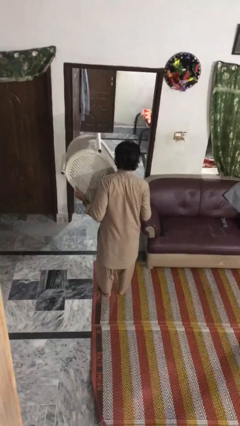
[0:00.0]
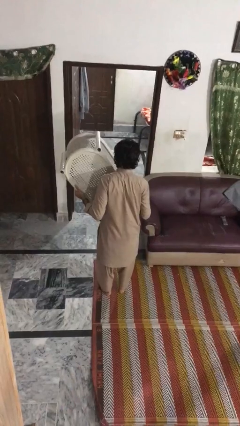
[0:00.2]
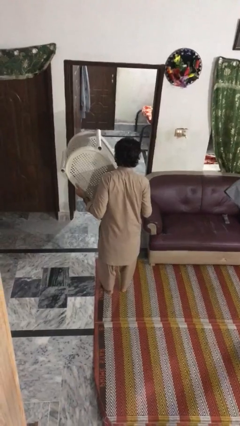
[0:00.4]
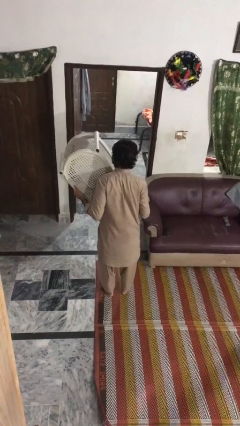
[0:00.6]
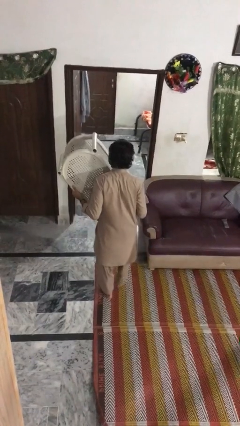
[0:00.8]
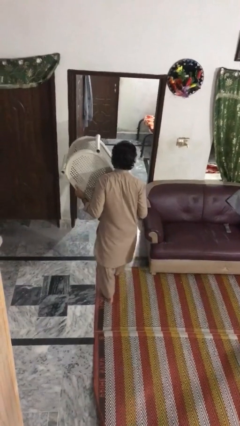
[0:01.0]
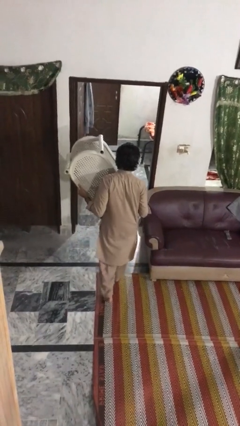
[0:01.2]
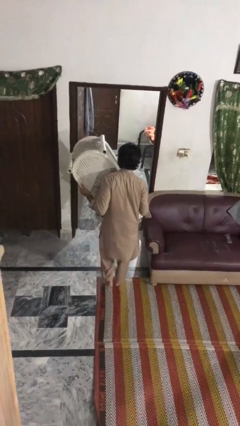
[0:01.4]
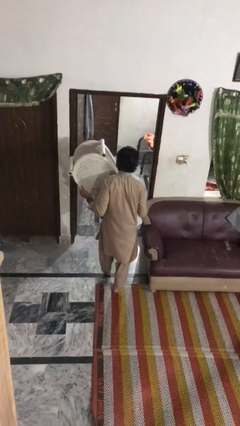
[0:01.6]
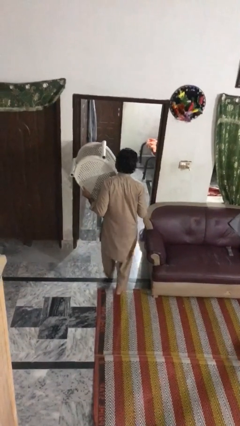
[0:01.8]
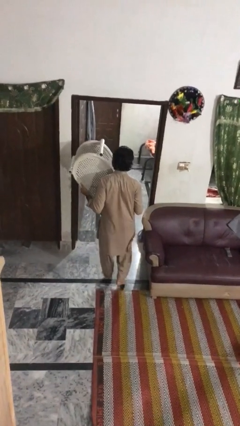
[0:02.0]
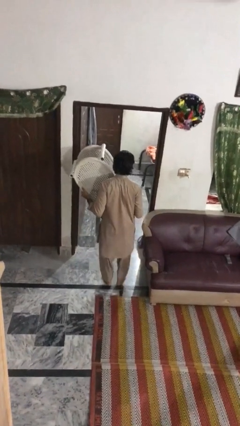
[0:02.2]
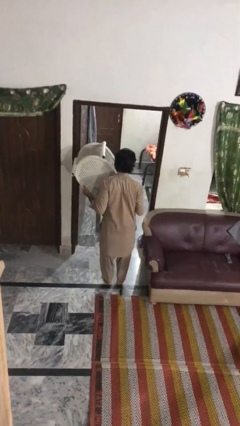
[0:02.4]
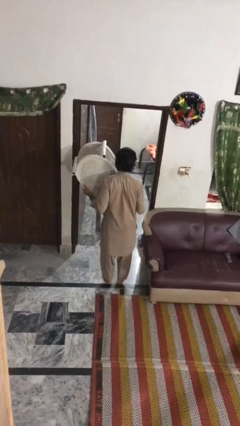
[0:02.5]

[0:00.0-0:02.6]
person carries furniture

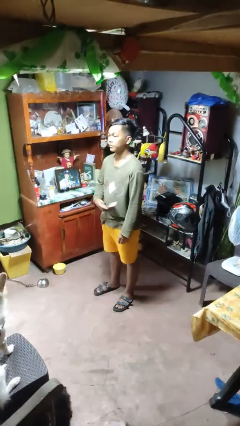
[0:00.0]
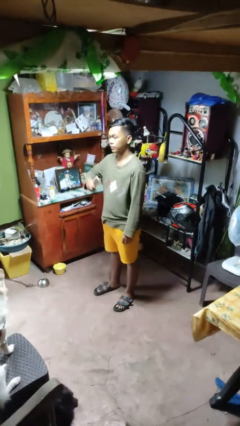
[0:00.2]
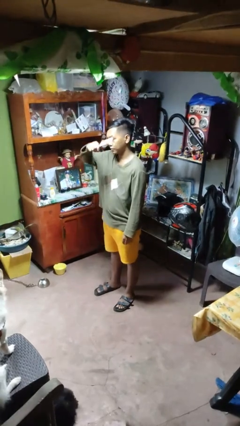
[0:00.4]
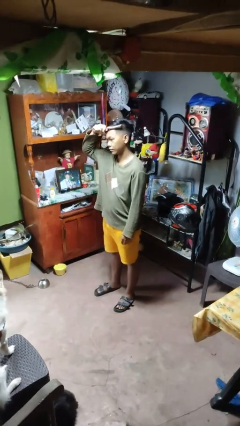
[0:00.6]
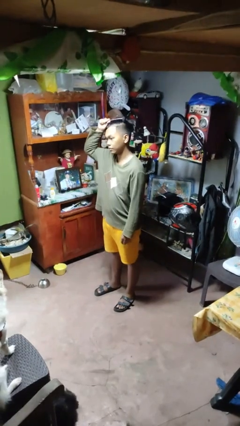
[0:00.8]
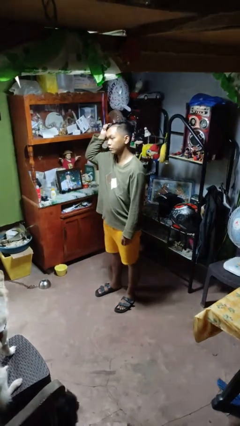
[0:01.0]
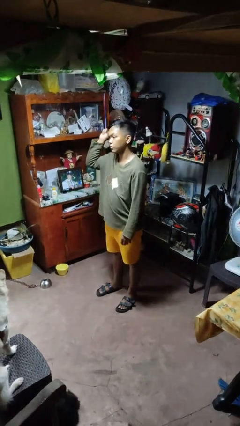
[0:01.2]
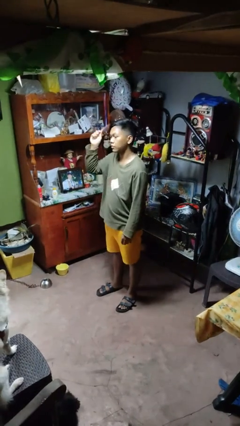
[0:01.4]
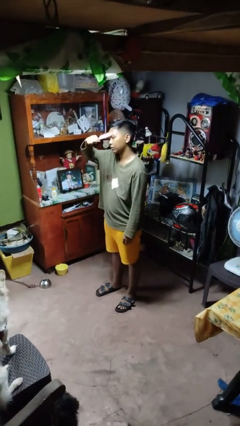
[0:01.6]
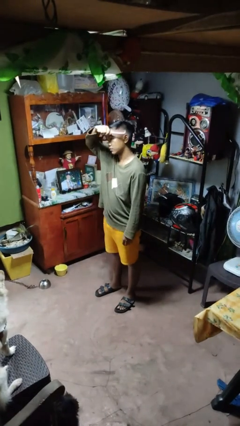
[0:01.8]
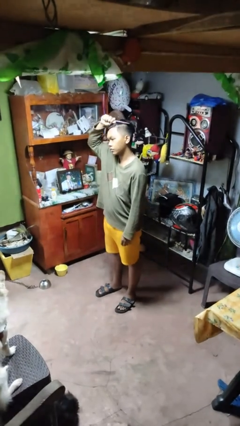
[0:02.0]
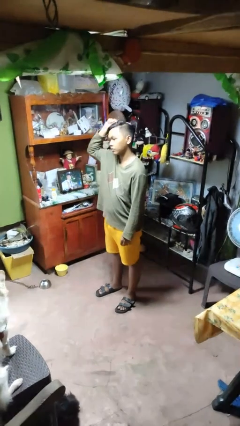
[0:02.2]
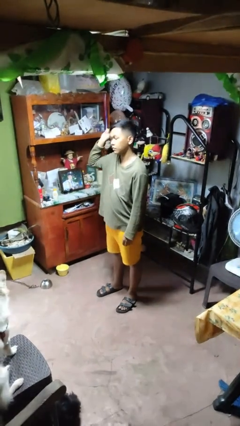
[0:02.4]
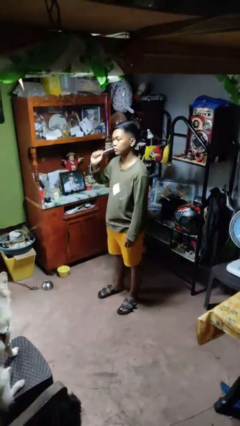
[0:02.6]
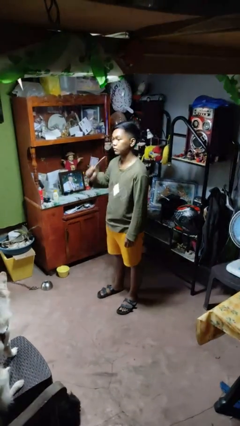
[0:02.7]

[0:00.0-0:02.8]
person brushes hair

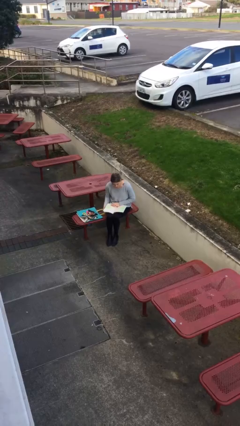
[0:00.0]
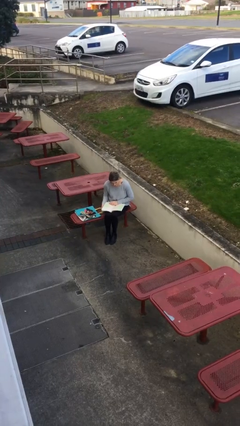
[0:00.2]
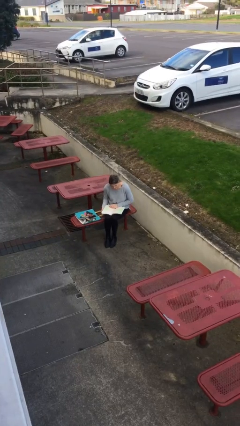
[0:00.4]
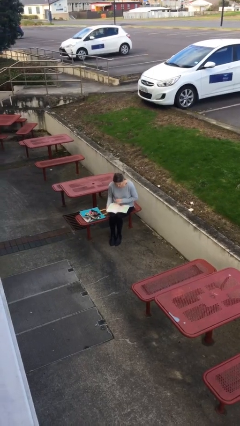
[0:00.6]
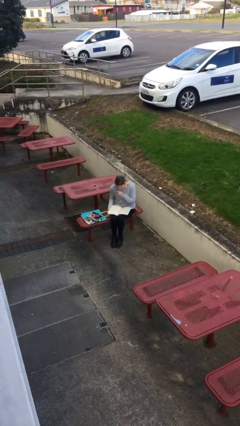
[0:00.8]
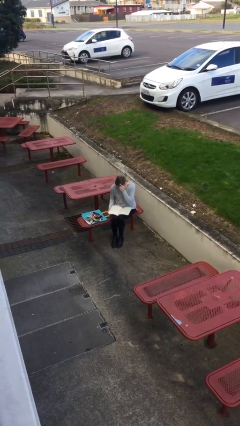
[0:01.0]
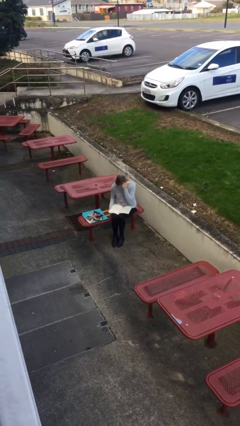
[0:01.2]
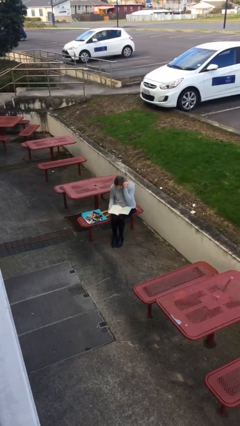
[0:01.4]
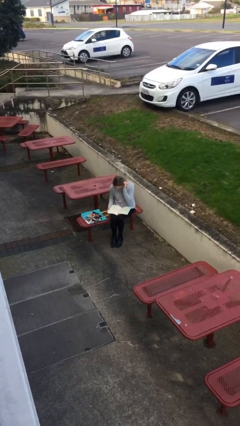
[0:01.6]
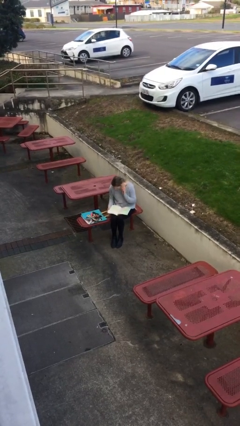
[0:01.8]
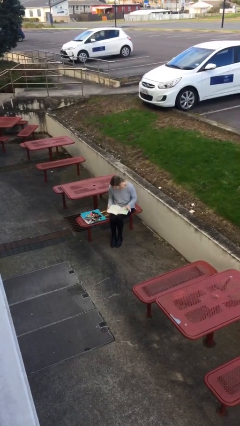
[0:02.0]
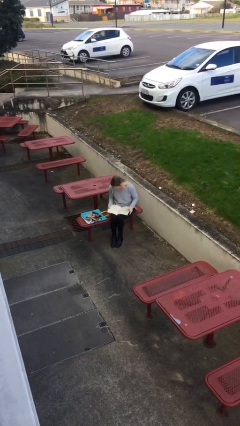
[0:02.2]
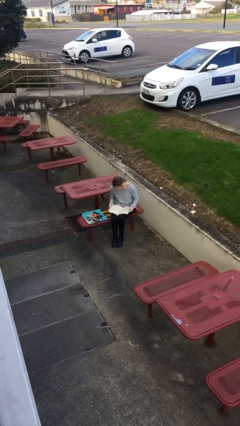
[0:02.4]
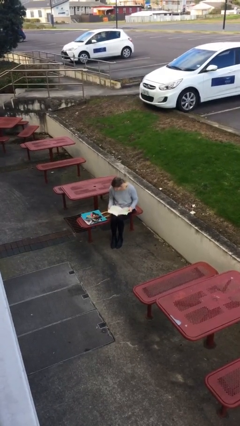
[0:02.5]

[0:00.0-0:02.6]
person reads document

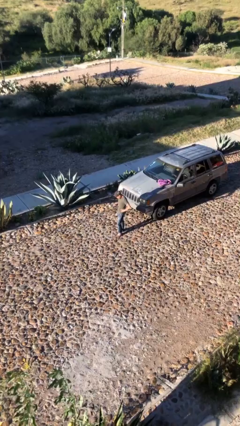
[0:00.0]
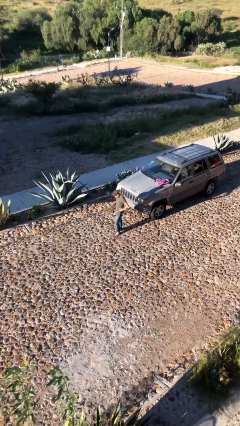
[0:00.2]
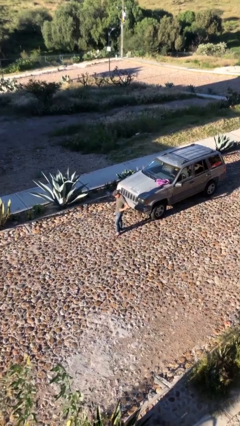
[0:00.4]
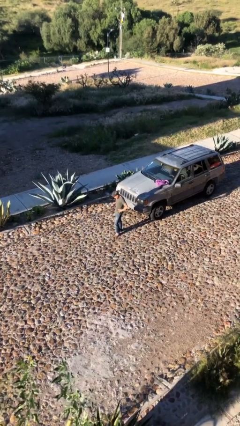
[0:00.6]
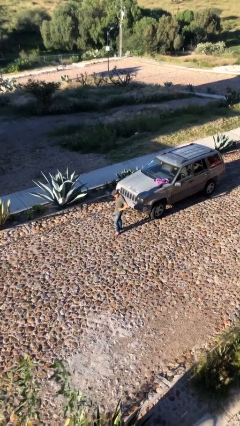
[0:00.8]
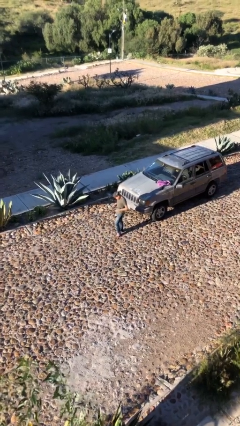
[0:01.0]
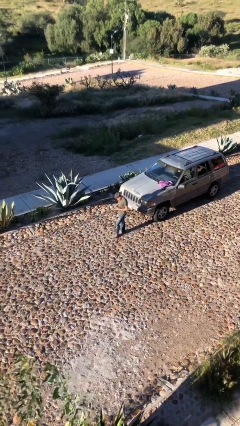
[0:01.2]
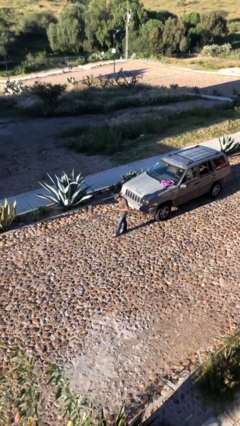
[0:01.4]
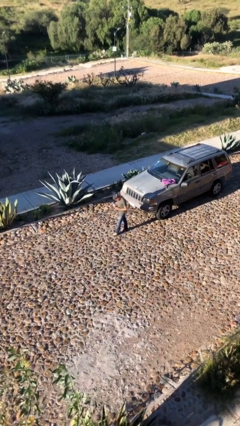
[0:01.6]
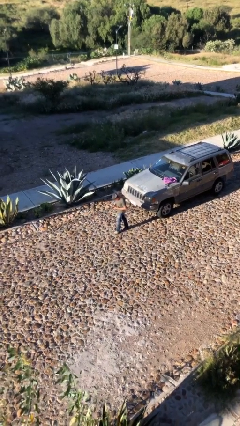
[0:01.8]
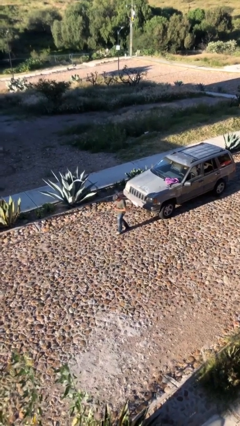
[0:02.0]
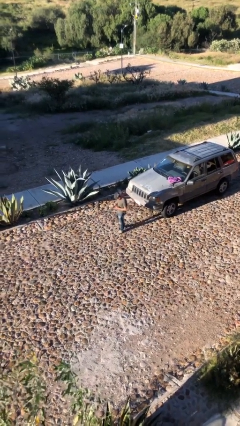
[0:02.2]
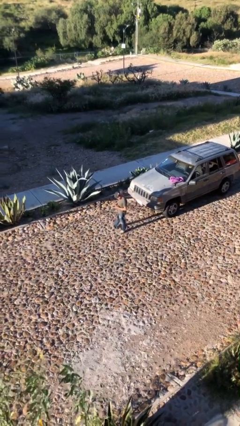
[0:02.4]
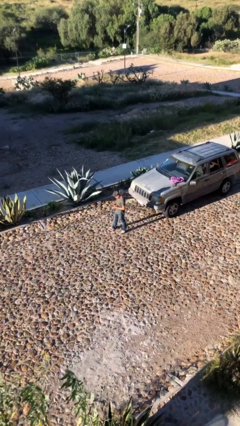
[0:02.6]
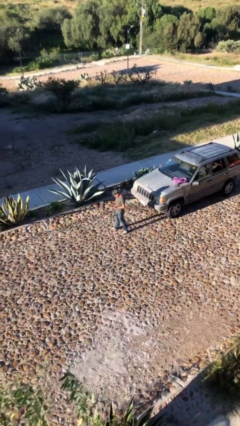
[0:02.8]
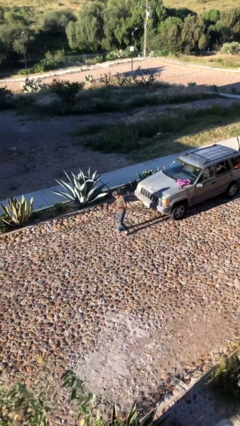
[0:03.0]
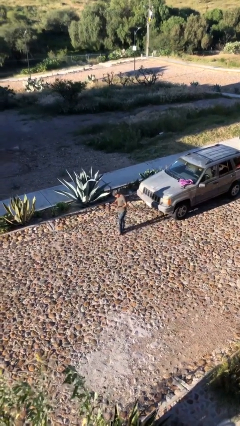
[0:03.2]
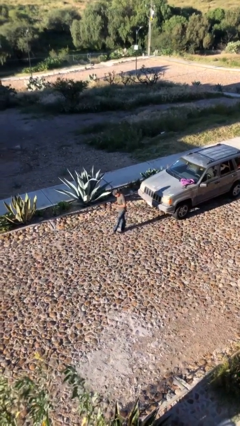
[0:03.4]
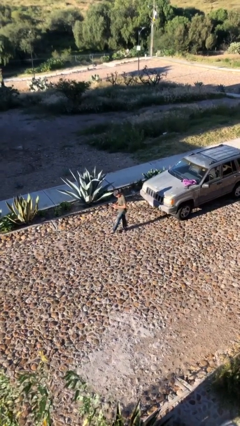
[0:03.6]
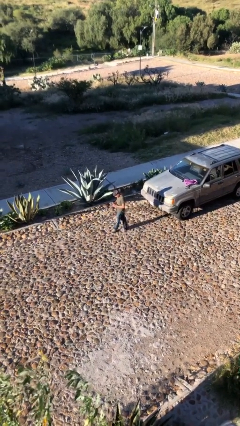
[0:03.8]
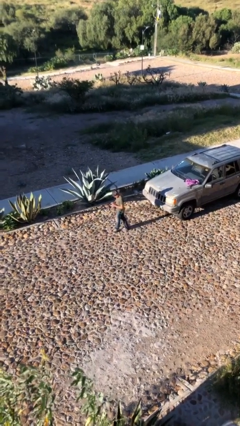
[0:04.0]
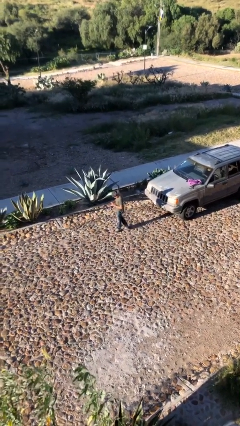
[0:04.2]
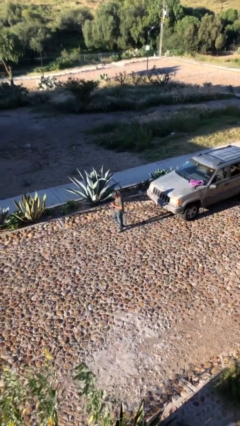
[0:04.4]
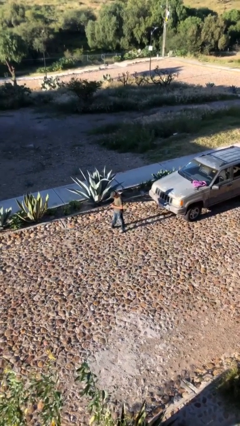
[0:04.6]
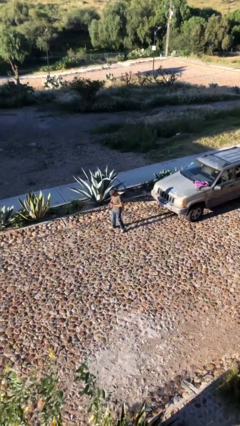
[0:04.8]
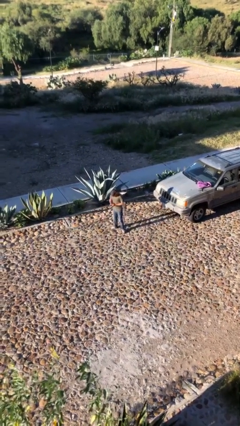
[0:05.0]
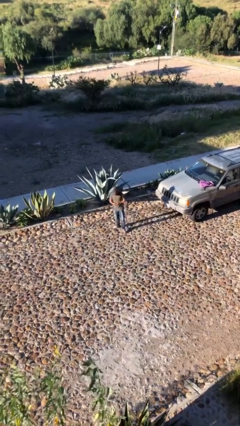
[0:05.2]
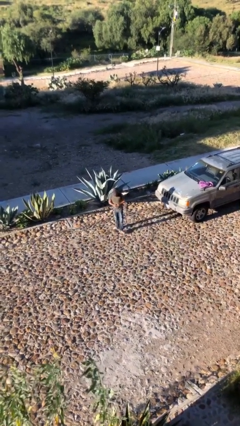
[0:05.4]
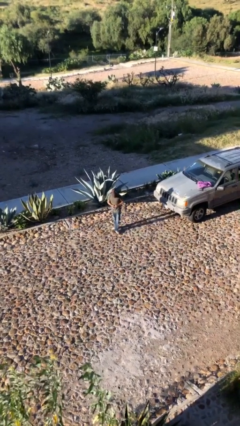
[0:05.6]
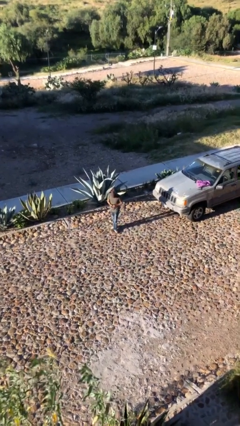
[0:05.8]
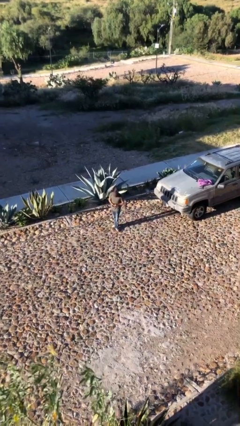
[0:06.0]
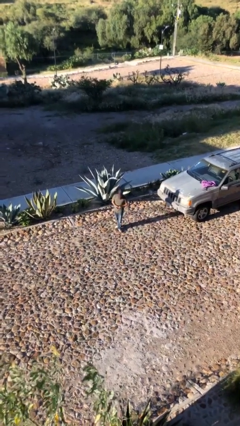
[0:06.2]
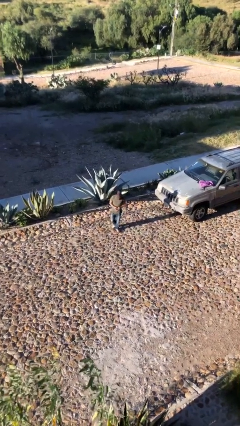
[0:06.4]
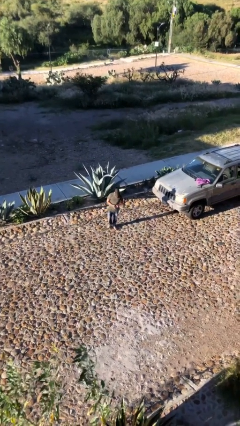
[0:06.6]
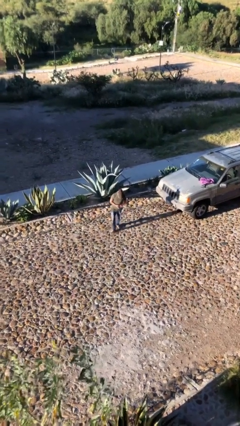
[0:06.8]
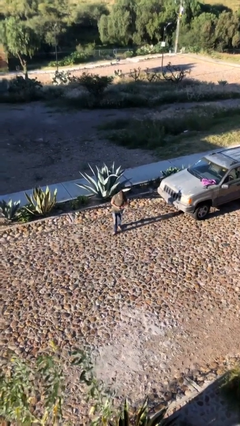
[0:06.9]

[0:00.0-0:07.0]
person texts on phone

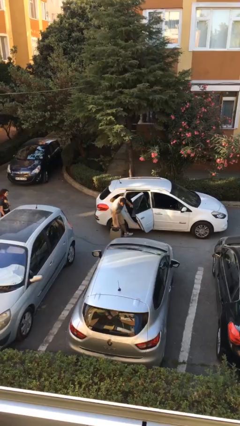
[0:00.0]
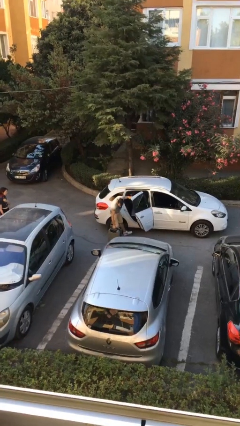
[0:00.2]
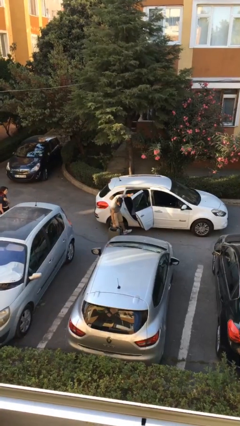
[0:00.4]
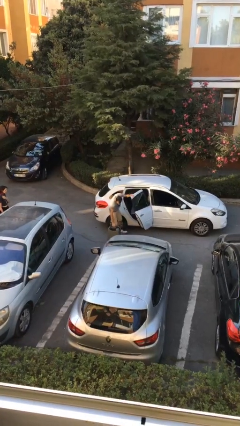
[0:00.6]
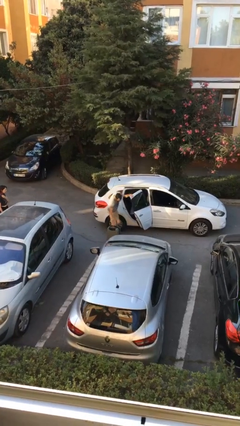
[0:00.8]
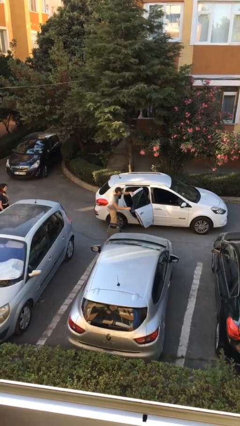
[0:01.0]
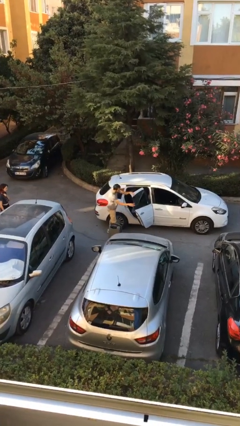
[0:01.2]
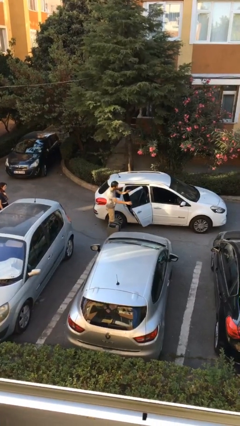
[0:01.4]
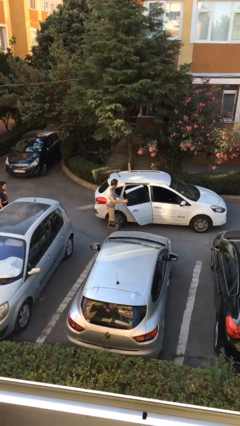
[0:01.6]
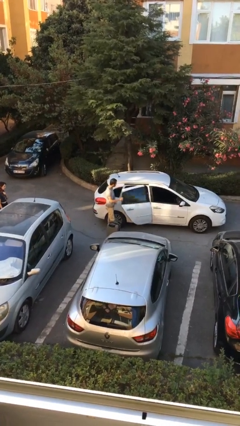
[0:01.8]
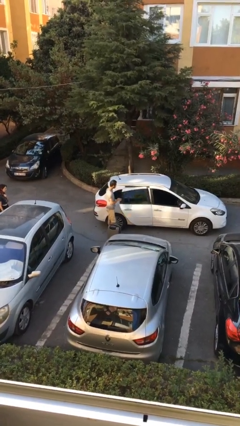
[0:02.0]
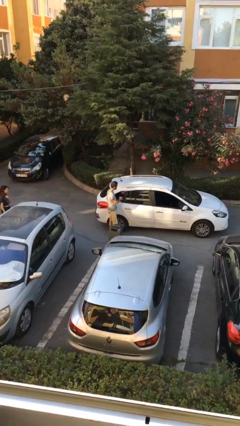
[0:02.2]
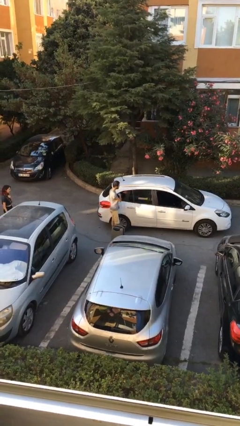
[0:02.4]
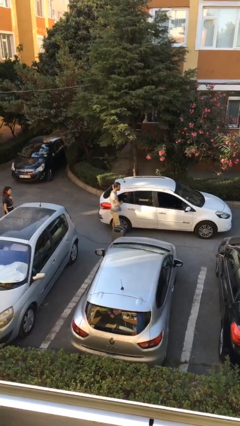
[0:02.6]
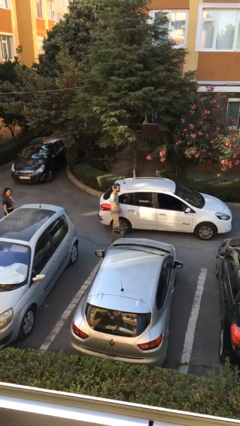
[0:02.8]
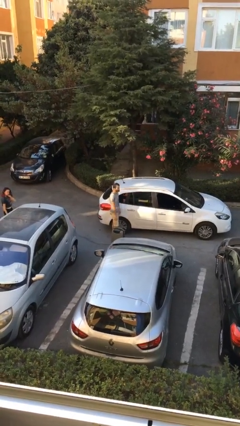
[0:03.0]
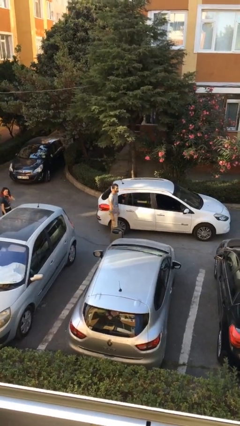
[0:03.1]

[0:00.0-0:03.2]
person closes car door
